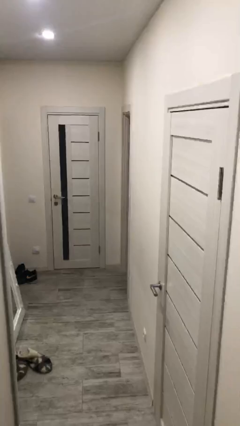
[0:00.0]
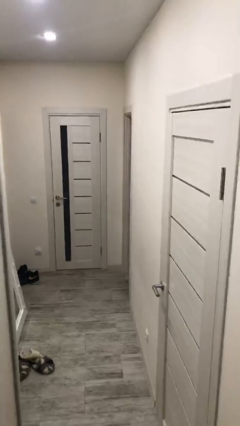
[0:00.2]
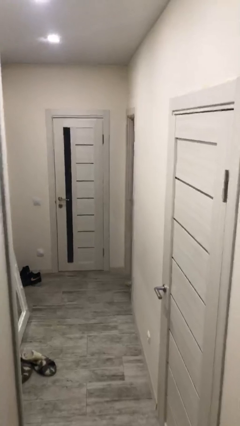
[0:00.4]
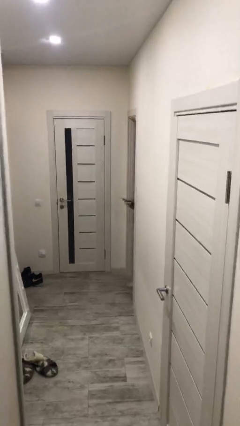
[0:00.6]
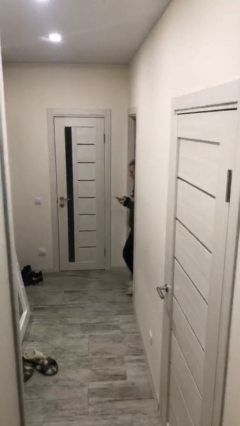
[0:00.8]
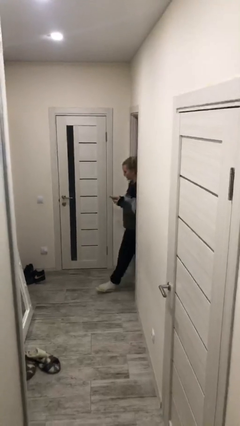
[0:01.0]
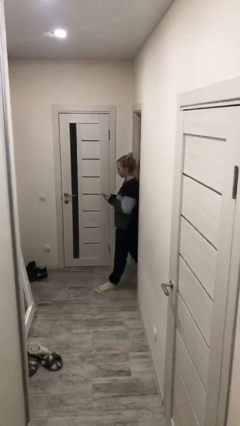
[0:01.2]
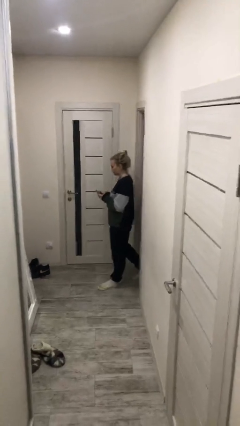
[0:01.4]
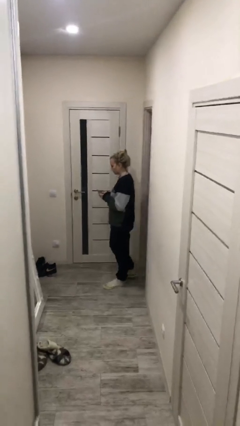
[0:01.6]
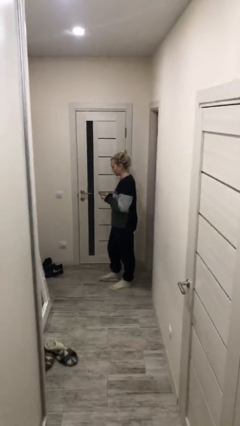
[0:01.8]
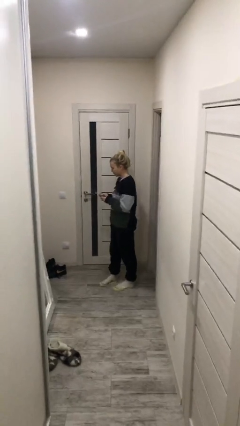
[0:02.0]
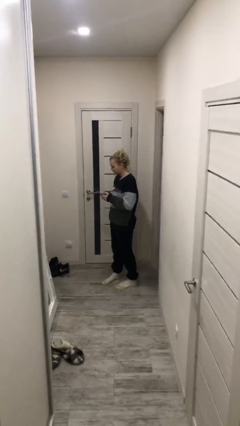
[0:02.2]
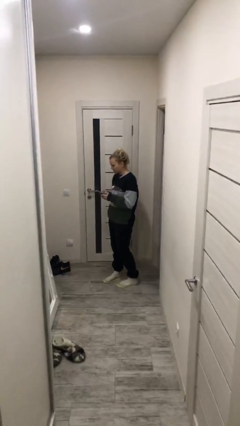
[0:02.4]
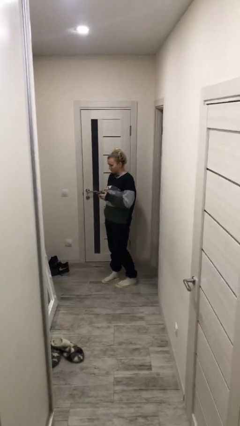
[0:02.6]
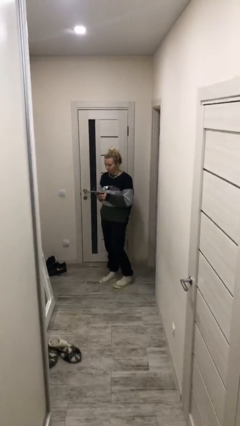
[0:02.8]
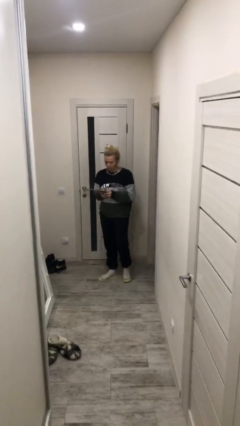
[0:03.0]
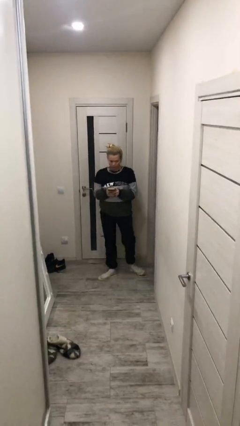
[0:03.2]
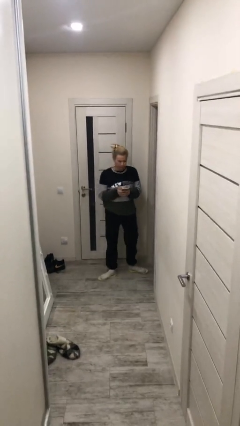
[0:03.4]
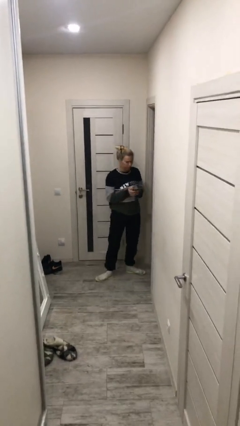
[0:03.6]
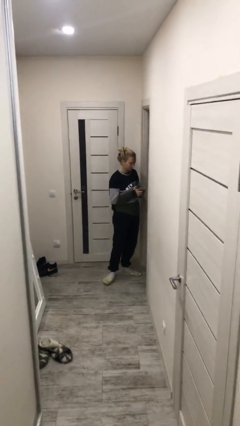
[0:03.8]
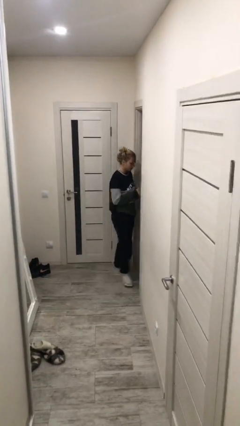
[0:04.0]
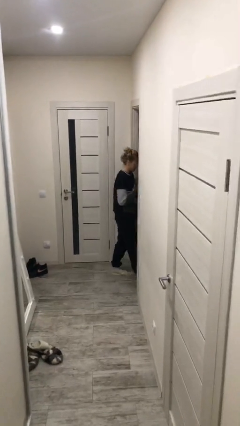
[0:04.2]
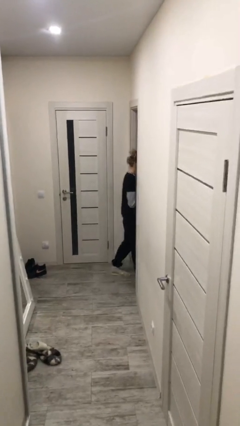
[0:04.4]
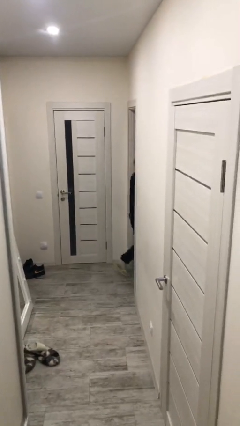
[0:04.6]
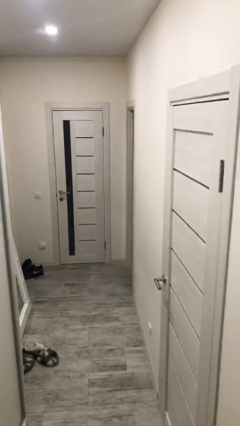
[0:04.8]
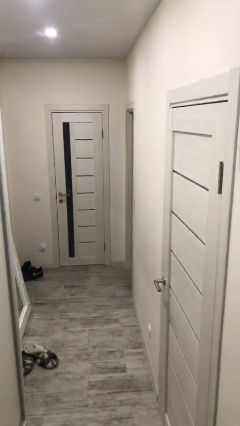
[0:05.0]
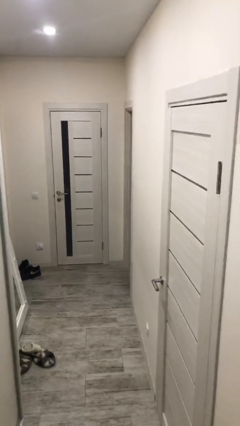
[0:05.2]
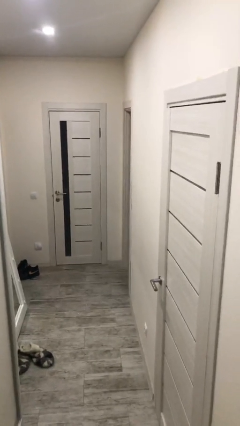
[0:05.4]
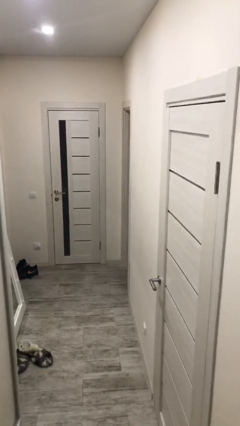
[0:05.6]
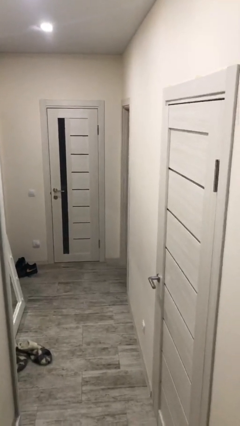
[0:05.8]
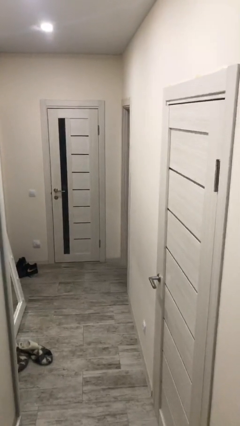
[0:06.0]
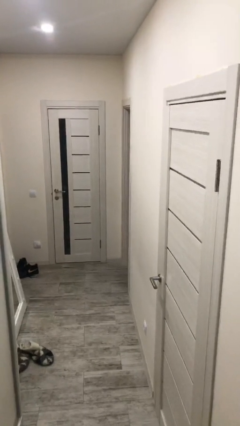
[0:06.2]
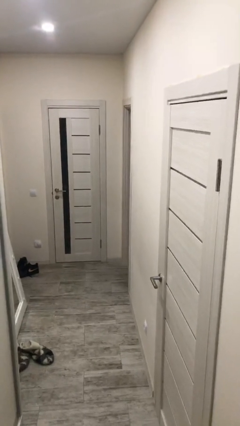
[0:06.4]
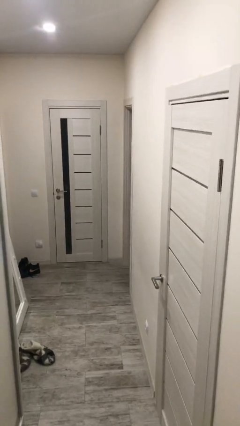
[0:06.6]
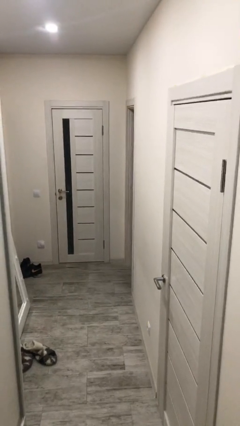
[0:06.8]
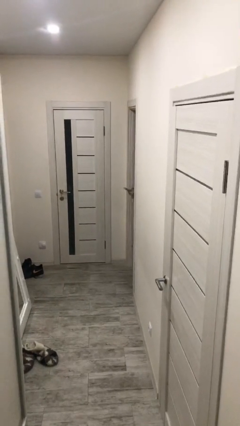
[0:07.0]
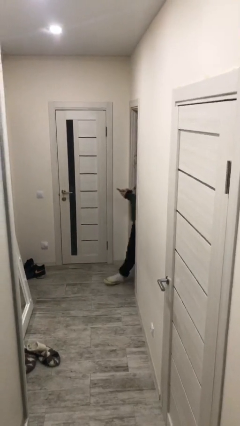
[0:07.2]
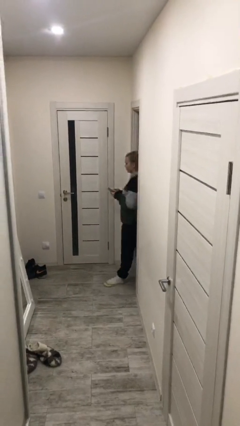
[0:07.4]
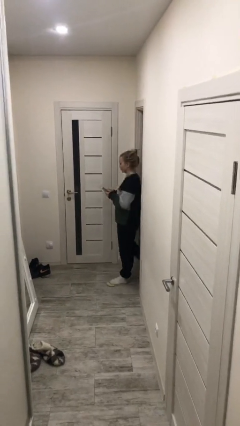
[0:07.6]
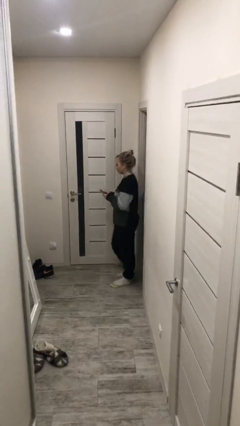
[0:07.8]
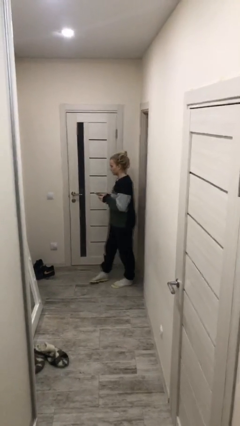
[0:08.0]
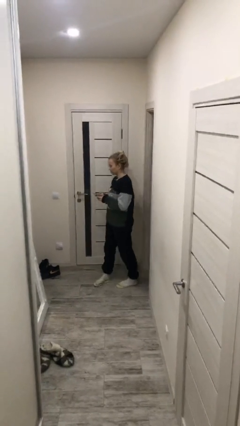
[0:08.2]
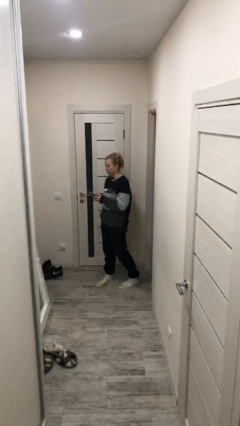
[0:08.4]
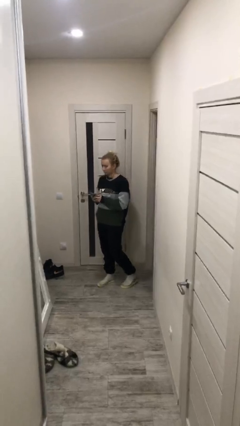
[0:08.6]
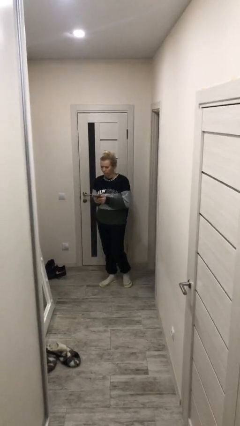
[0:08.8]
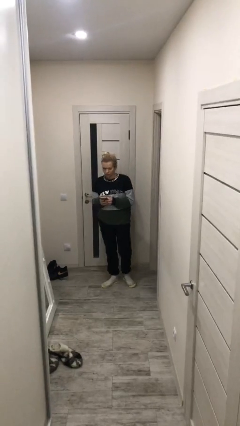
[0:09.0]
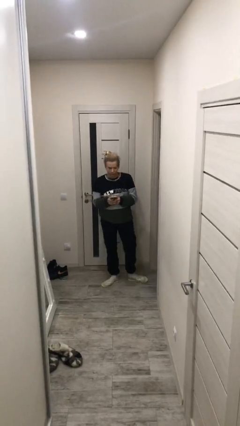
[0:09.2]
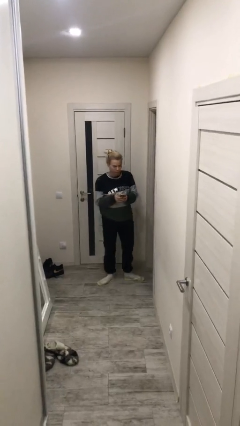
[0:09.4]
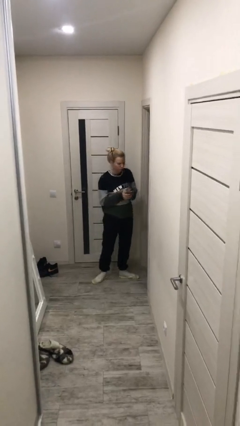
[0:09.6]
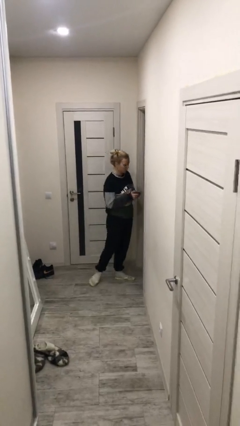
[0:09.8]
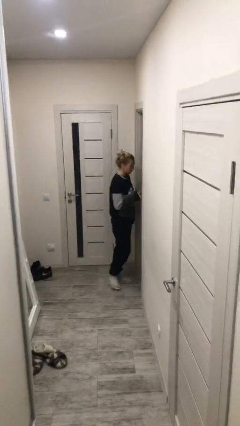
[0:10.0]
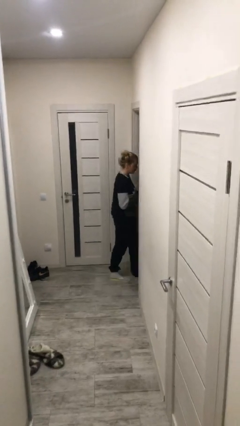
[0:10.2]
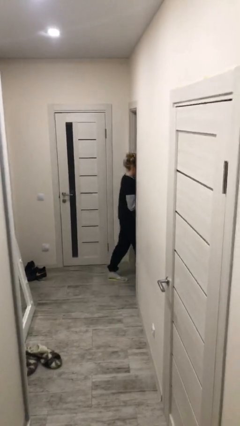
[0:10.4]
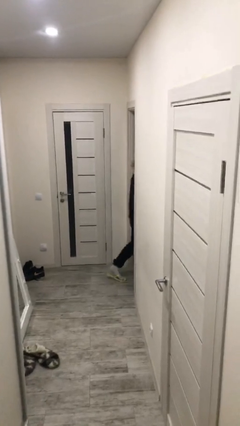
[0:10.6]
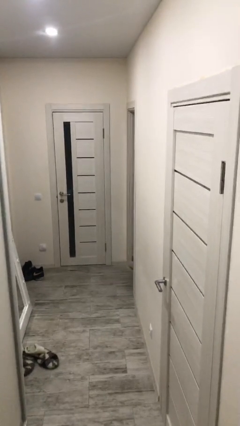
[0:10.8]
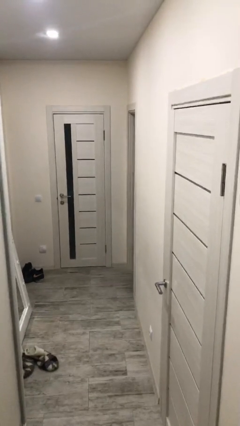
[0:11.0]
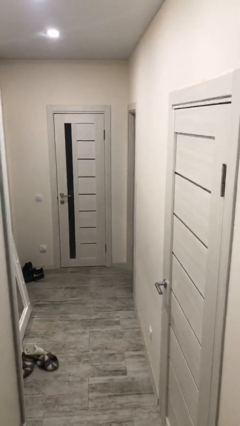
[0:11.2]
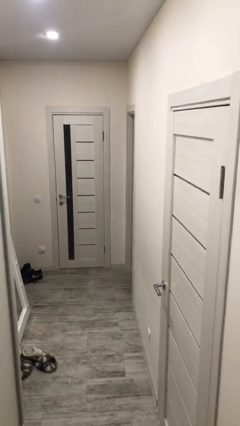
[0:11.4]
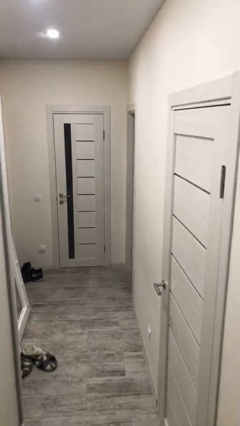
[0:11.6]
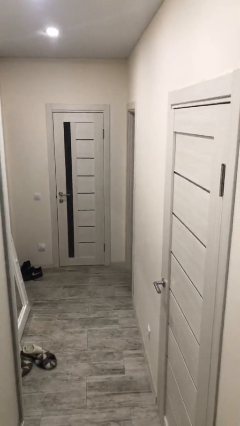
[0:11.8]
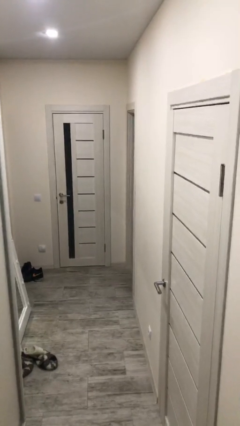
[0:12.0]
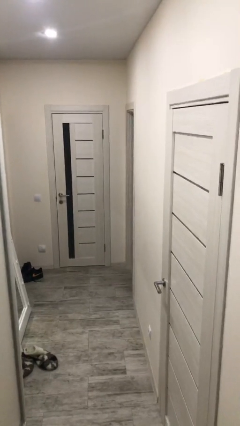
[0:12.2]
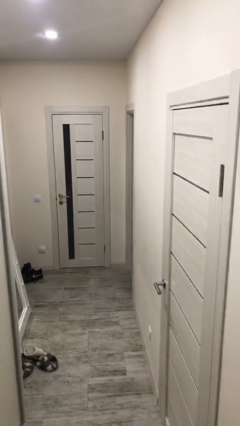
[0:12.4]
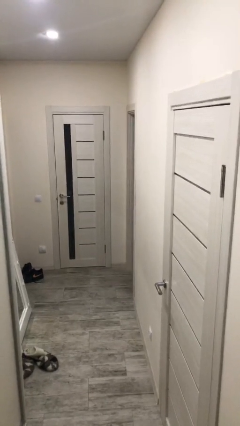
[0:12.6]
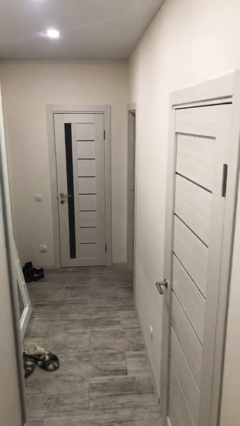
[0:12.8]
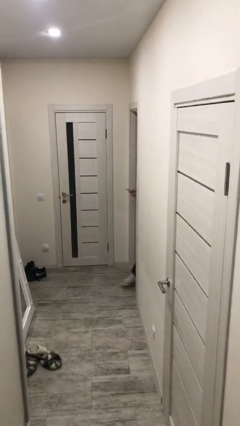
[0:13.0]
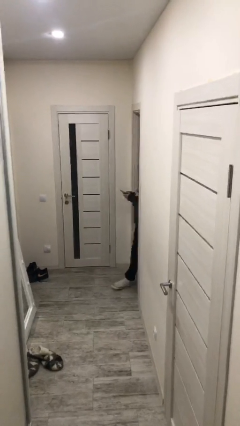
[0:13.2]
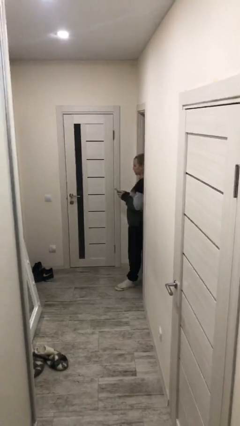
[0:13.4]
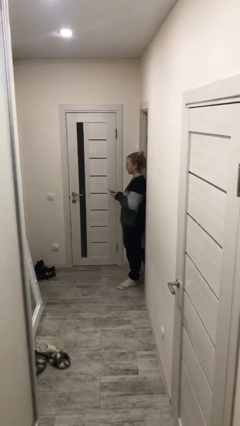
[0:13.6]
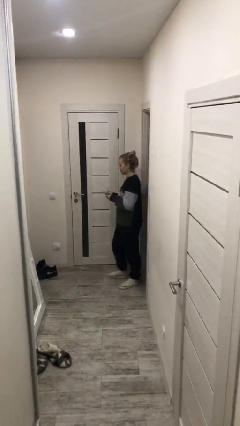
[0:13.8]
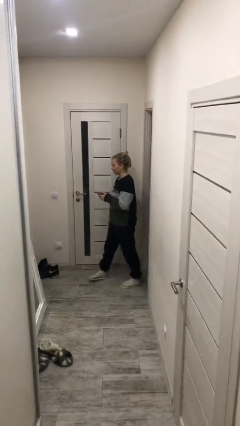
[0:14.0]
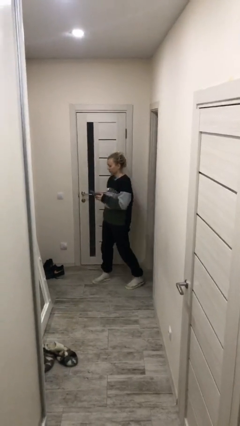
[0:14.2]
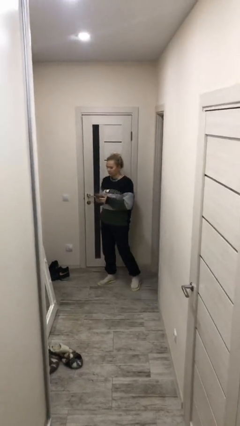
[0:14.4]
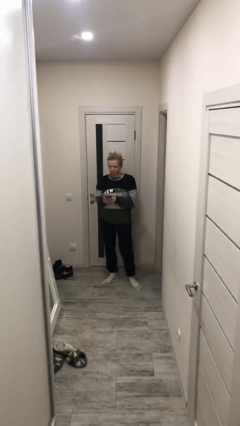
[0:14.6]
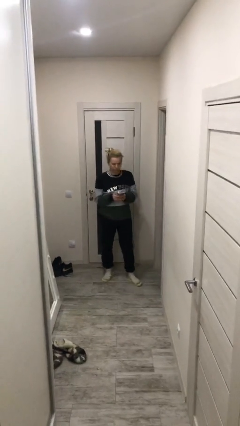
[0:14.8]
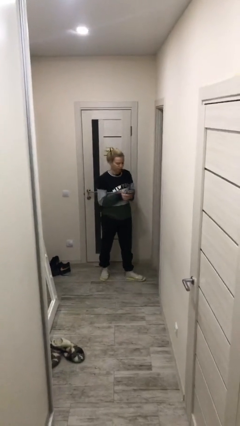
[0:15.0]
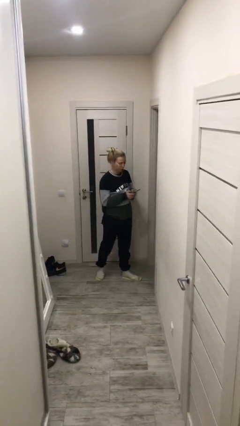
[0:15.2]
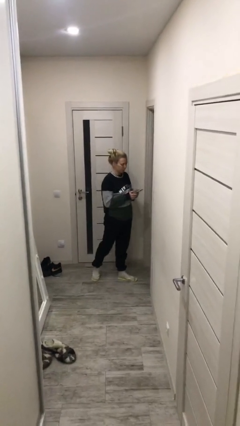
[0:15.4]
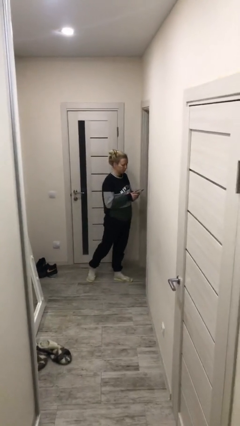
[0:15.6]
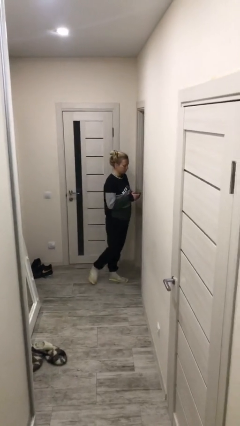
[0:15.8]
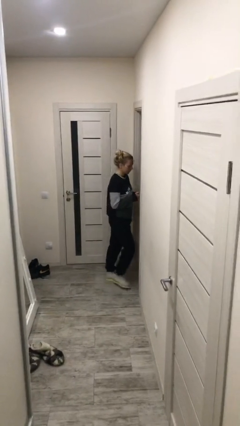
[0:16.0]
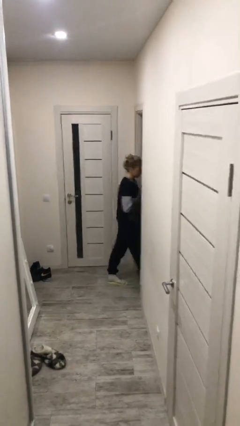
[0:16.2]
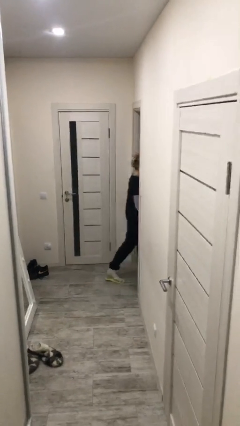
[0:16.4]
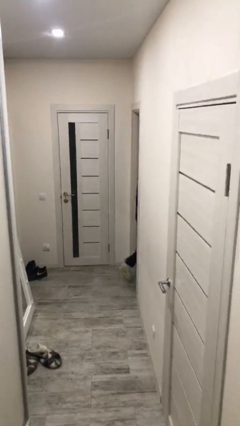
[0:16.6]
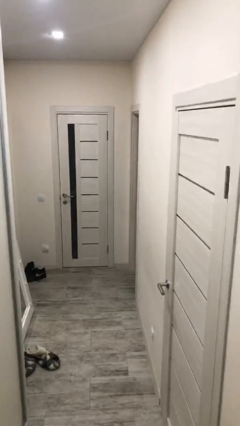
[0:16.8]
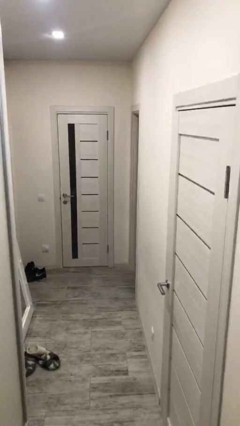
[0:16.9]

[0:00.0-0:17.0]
person texts on phone

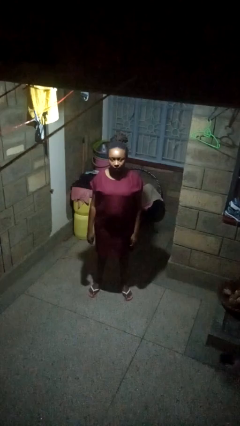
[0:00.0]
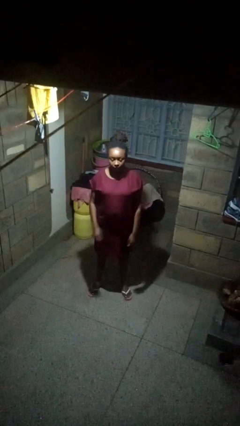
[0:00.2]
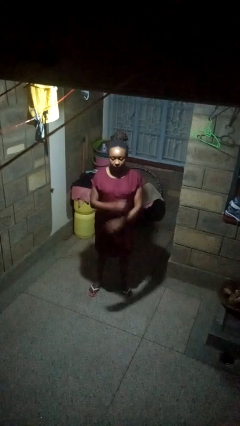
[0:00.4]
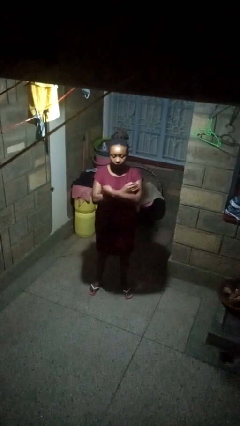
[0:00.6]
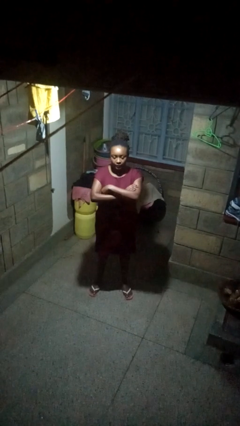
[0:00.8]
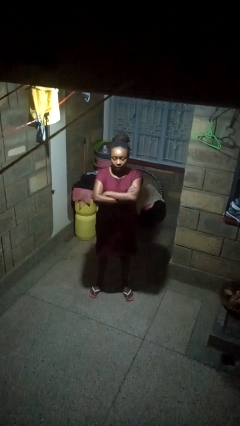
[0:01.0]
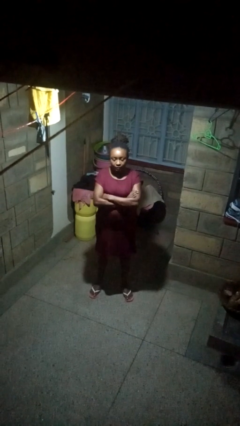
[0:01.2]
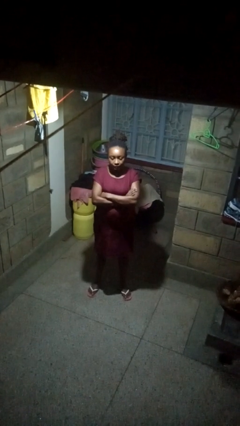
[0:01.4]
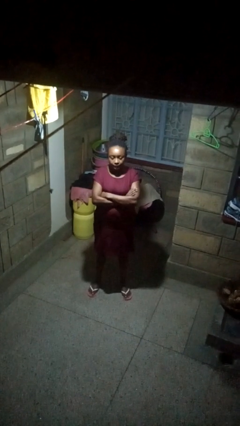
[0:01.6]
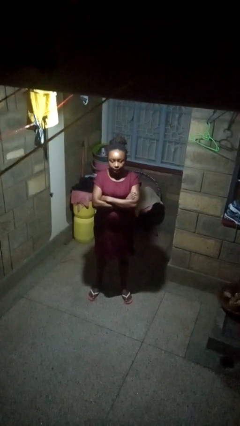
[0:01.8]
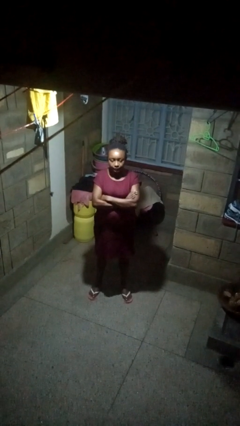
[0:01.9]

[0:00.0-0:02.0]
person crosses arms
